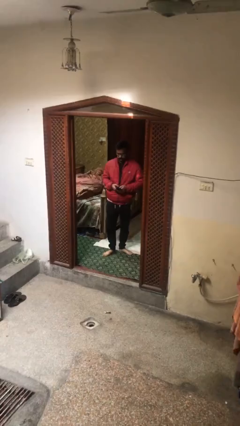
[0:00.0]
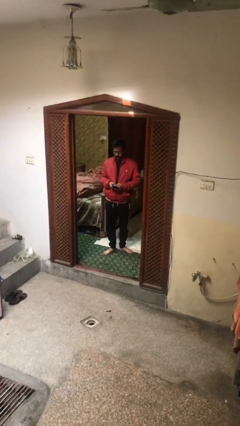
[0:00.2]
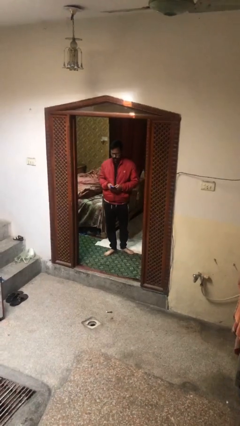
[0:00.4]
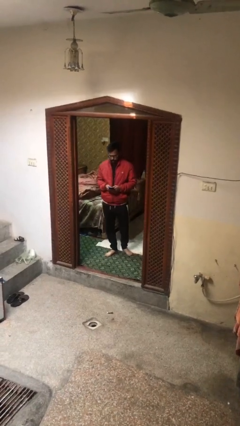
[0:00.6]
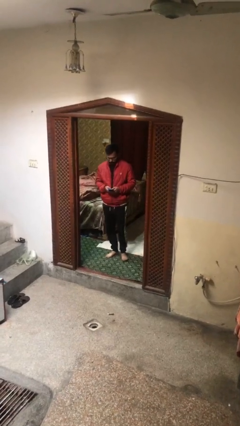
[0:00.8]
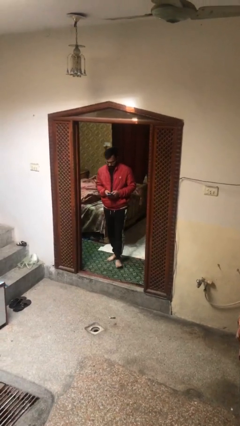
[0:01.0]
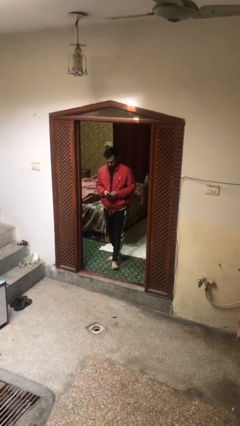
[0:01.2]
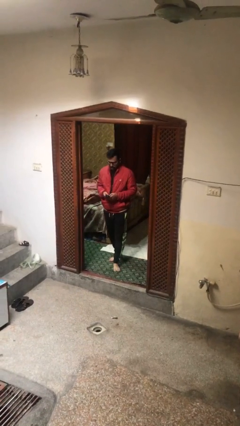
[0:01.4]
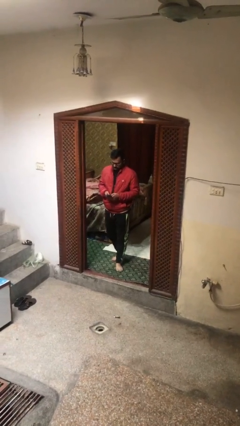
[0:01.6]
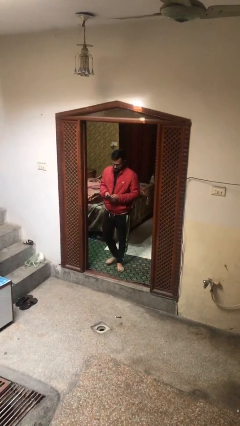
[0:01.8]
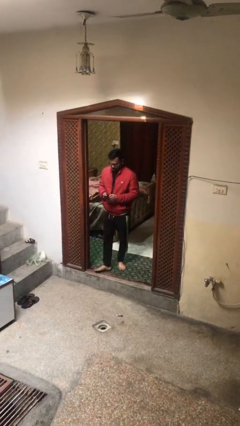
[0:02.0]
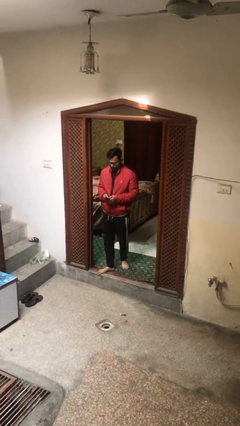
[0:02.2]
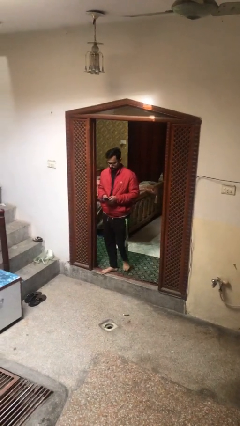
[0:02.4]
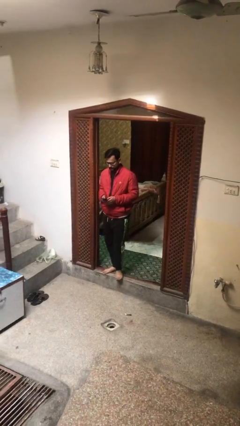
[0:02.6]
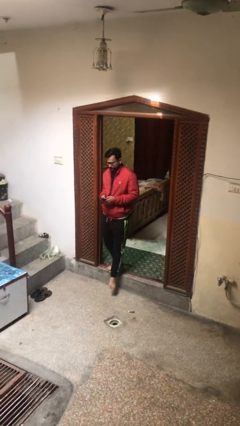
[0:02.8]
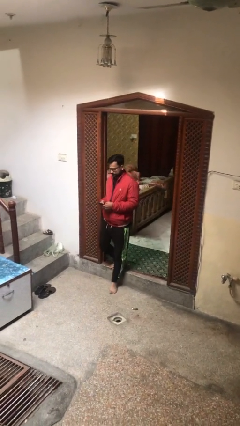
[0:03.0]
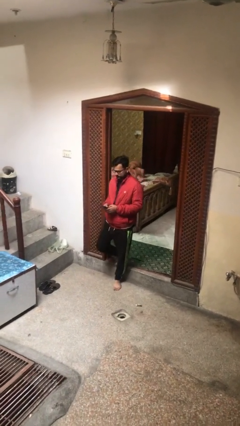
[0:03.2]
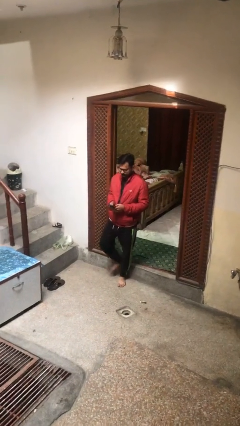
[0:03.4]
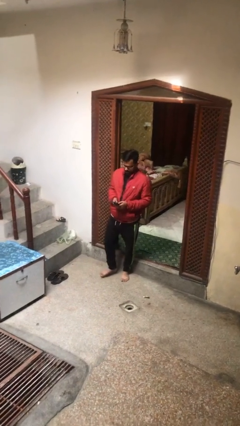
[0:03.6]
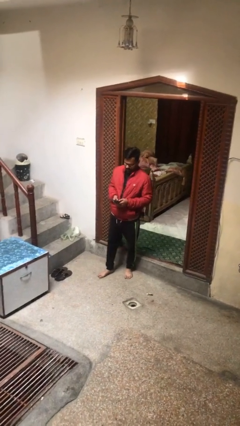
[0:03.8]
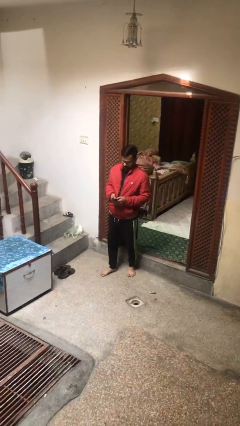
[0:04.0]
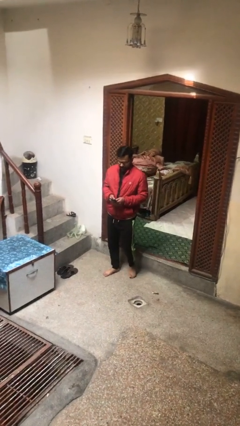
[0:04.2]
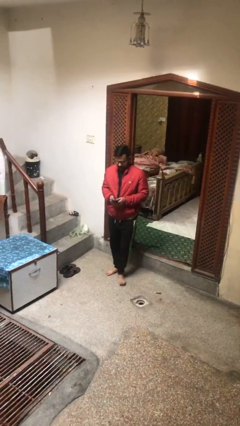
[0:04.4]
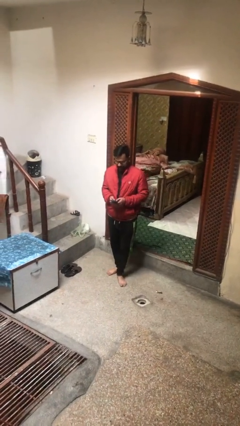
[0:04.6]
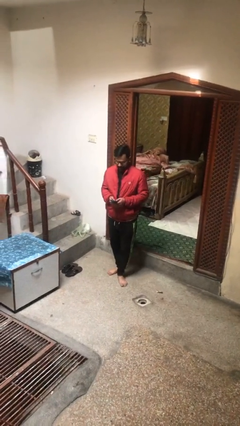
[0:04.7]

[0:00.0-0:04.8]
person enters scene through structure

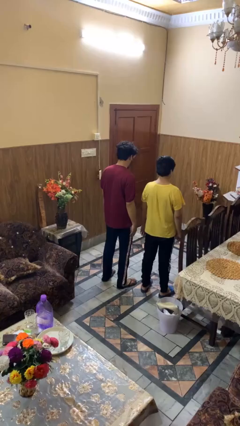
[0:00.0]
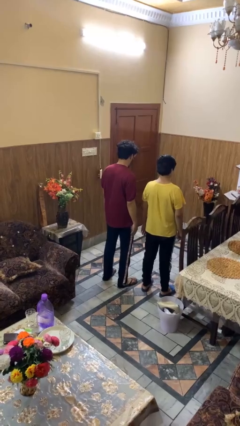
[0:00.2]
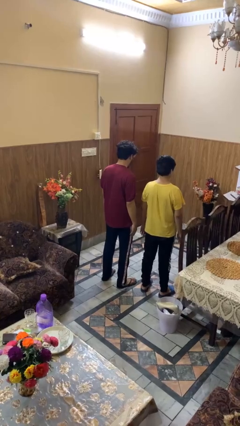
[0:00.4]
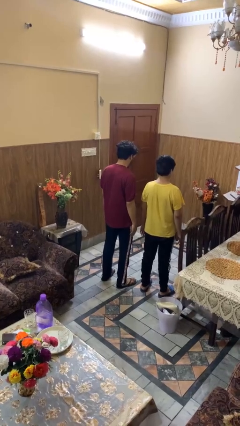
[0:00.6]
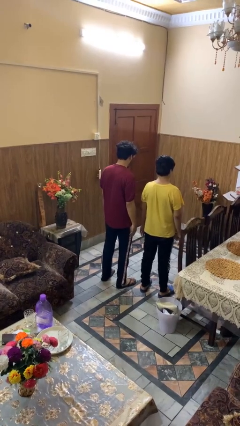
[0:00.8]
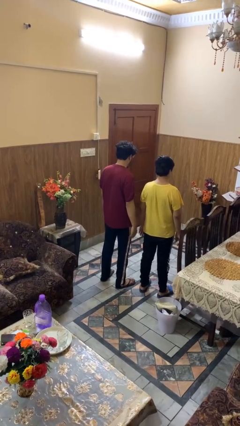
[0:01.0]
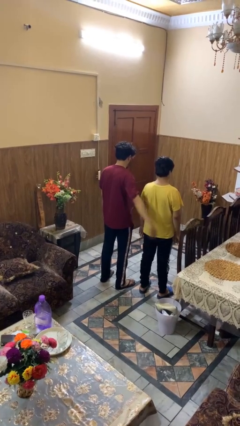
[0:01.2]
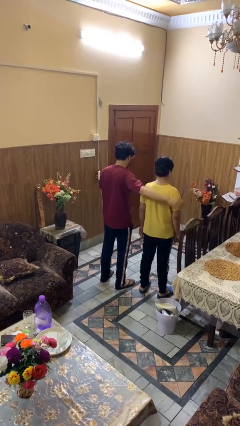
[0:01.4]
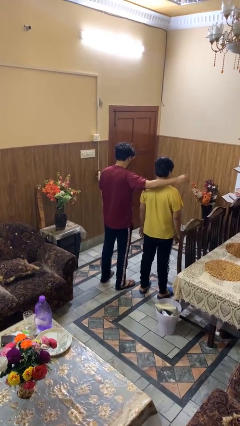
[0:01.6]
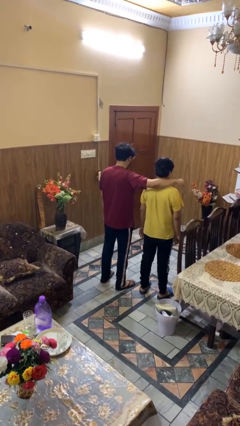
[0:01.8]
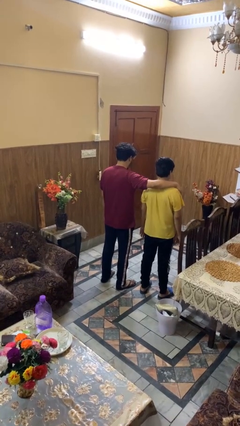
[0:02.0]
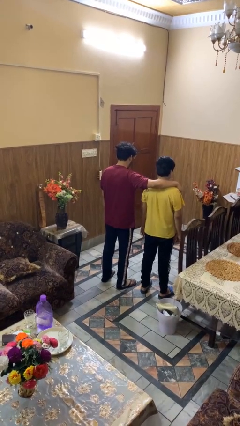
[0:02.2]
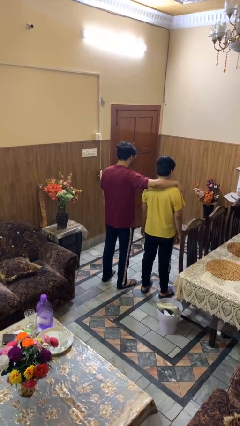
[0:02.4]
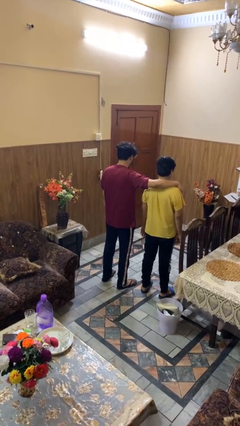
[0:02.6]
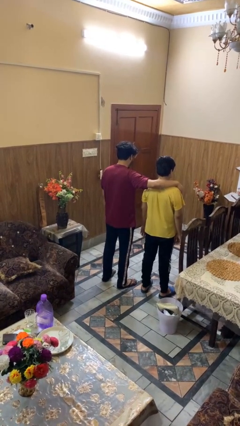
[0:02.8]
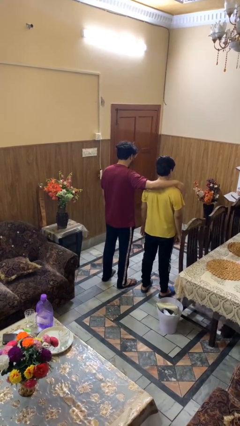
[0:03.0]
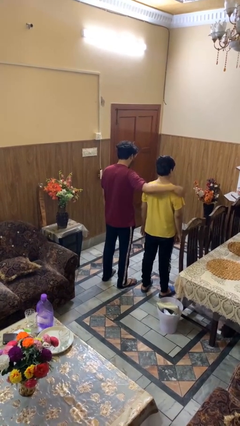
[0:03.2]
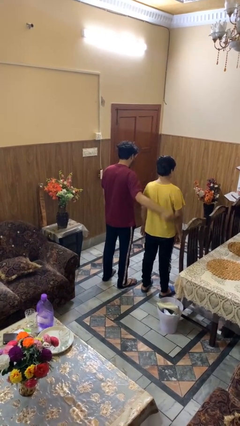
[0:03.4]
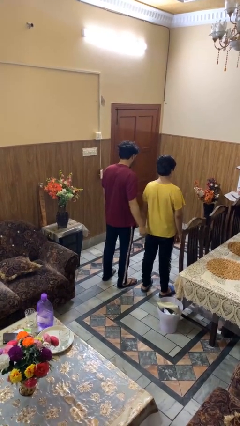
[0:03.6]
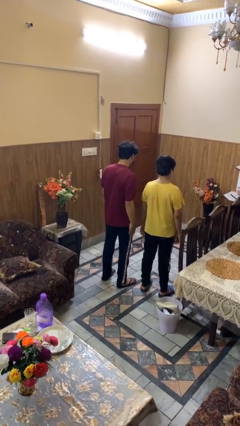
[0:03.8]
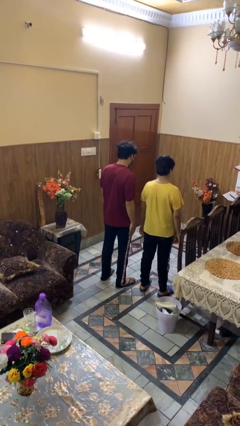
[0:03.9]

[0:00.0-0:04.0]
person pounds shoulders of person

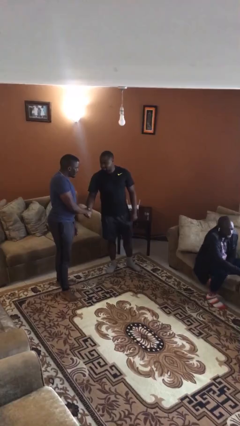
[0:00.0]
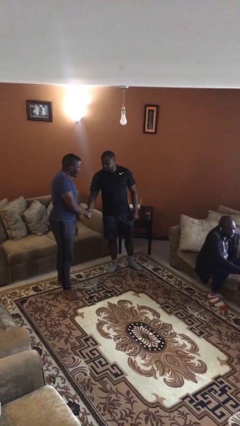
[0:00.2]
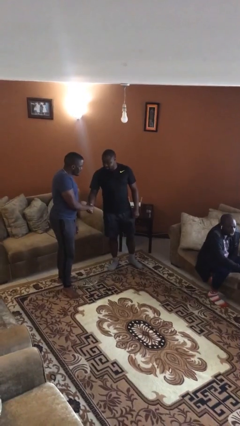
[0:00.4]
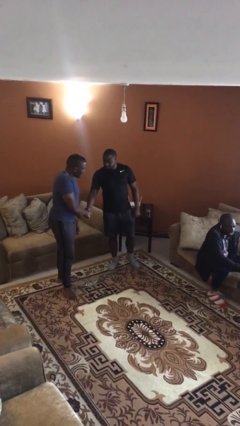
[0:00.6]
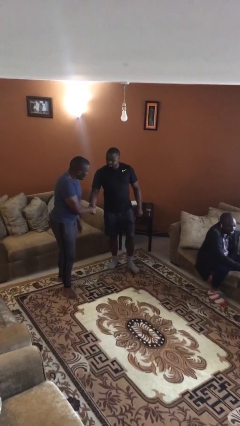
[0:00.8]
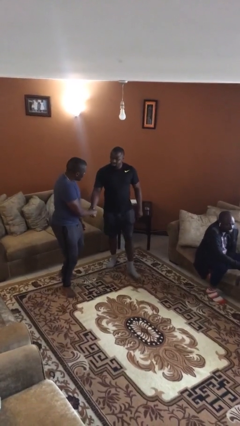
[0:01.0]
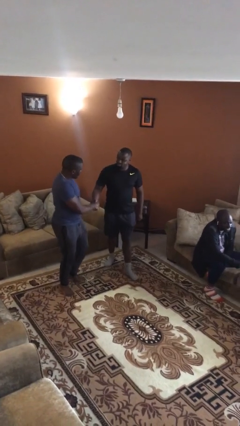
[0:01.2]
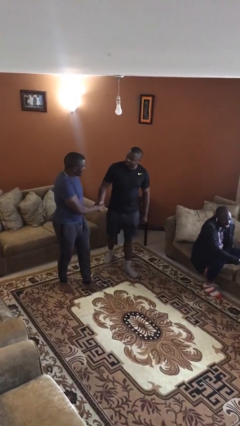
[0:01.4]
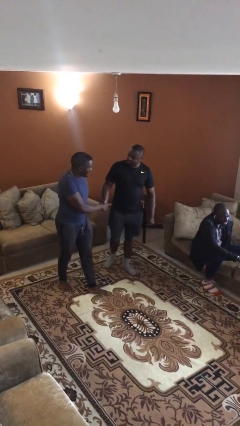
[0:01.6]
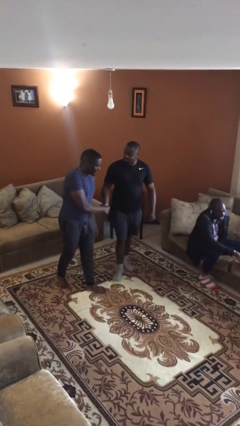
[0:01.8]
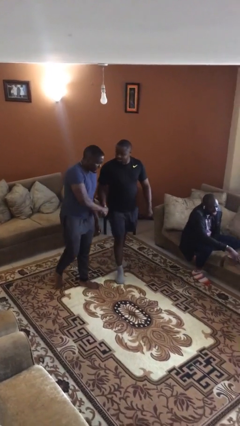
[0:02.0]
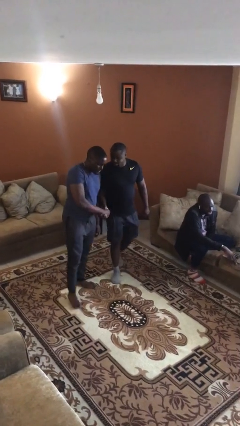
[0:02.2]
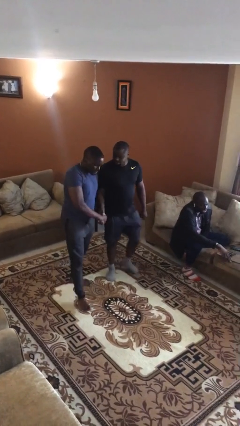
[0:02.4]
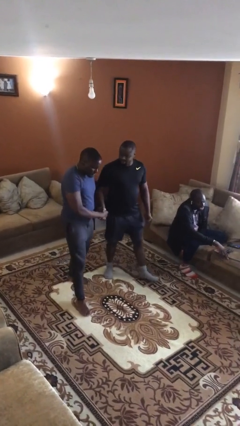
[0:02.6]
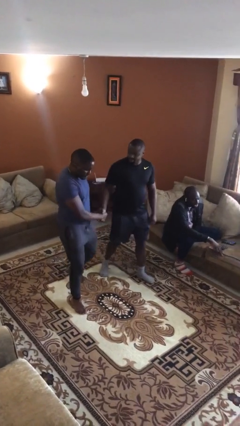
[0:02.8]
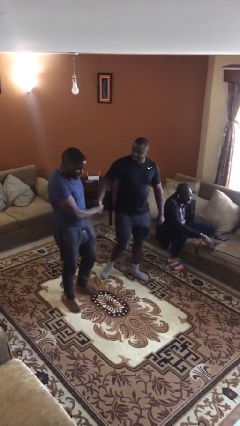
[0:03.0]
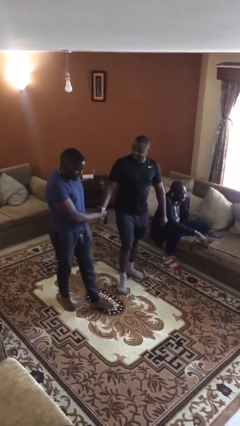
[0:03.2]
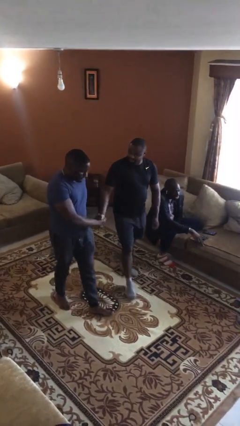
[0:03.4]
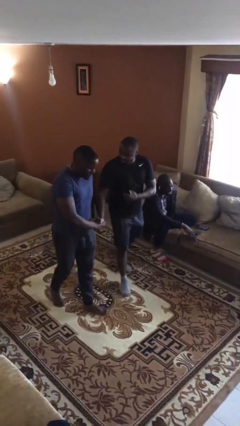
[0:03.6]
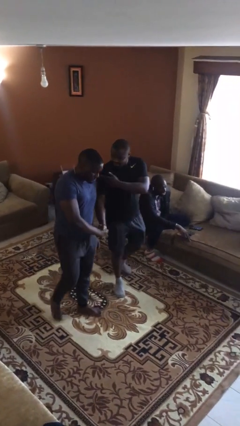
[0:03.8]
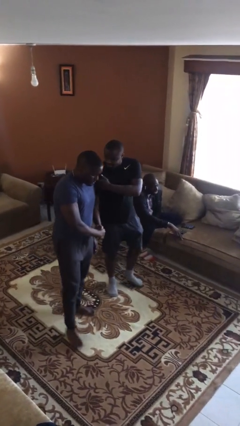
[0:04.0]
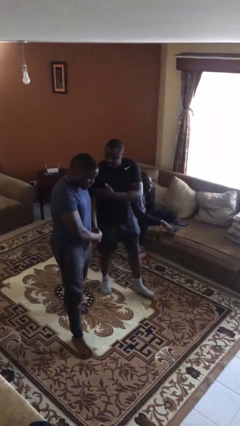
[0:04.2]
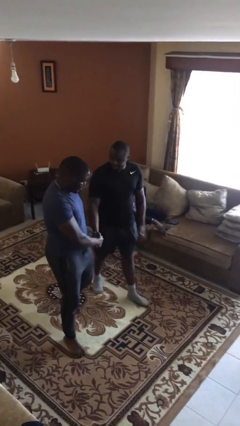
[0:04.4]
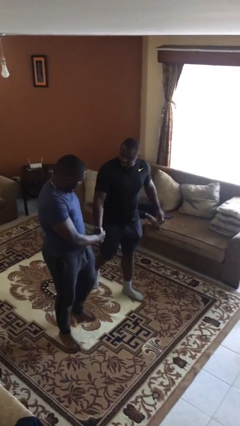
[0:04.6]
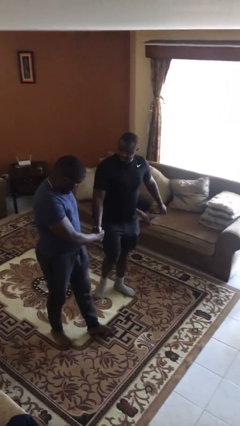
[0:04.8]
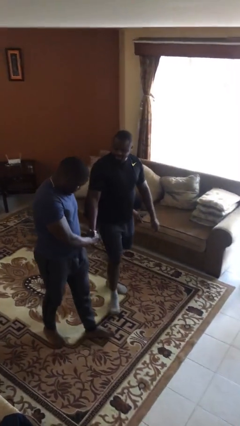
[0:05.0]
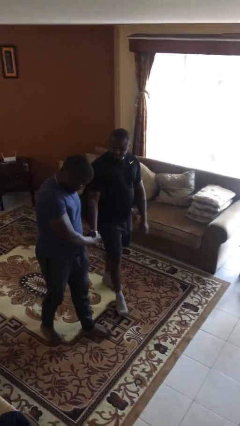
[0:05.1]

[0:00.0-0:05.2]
person holds hand

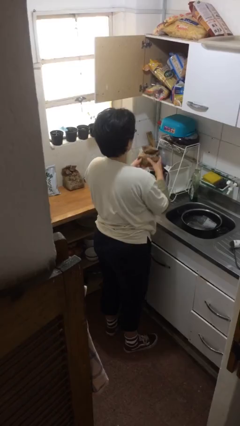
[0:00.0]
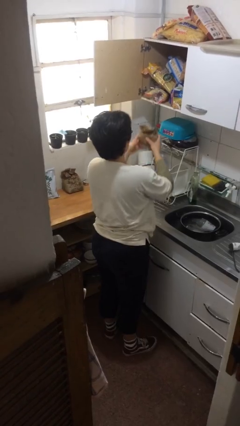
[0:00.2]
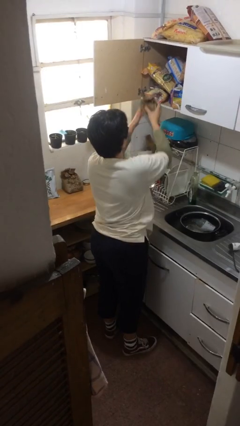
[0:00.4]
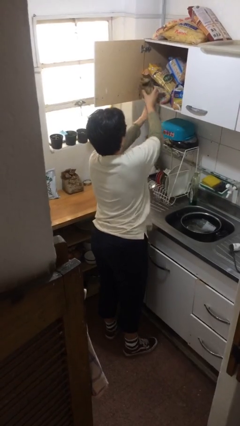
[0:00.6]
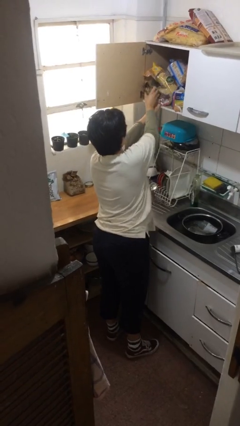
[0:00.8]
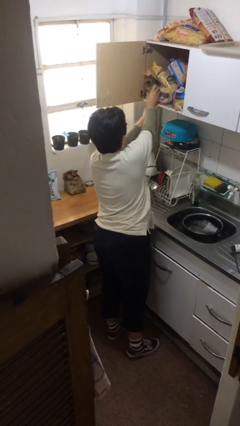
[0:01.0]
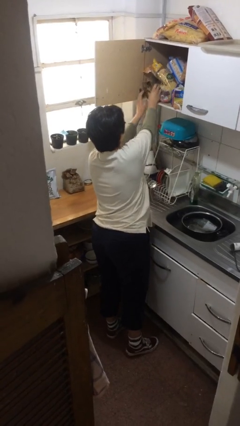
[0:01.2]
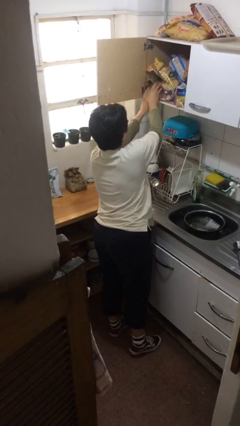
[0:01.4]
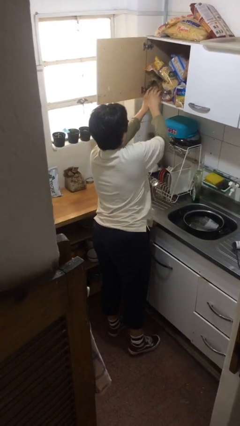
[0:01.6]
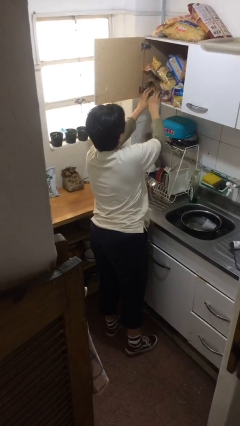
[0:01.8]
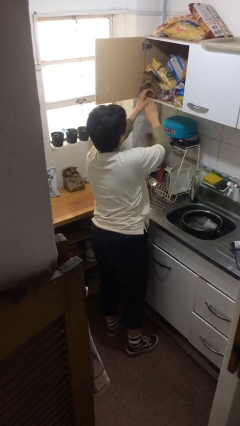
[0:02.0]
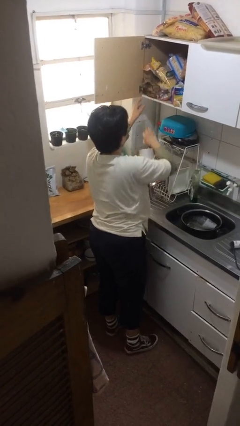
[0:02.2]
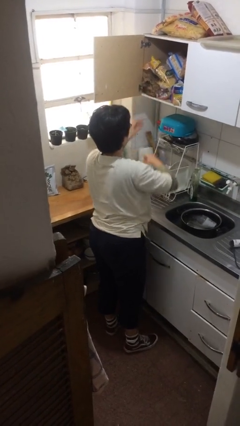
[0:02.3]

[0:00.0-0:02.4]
person puts object in cabinet

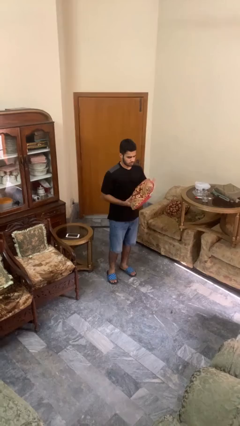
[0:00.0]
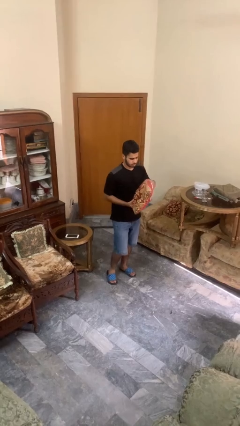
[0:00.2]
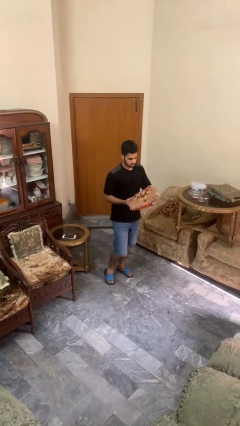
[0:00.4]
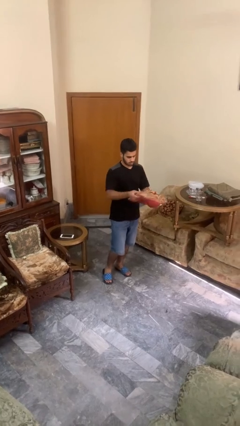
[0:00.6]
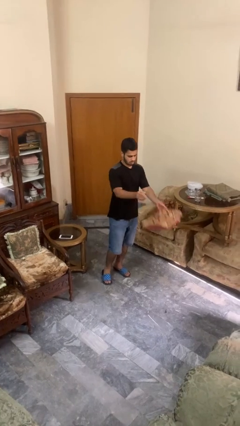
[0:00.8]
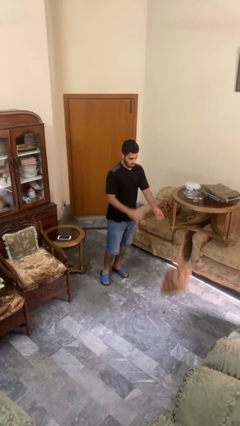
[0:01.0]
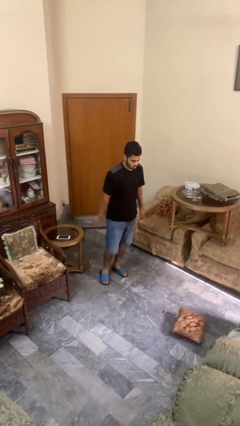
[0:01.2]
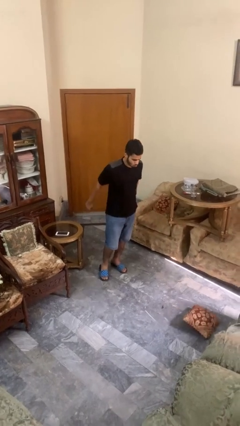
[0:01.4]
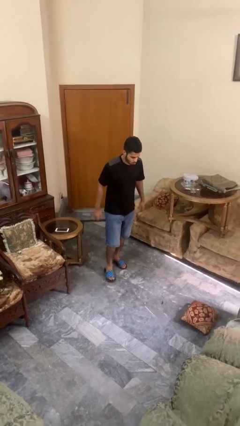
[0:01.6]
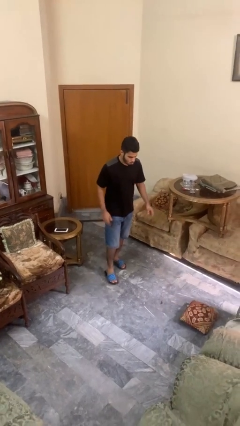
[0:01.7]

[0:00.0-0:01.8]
person throws object to ground
